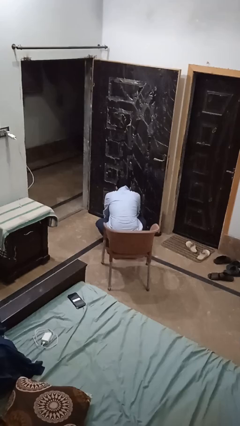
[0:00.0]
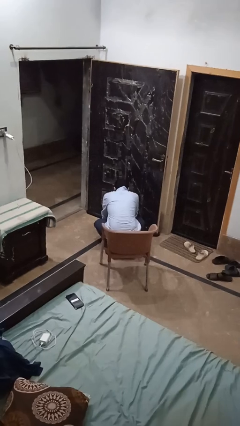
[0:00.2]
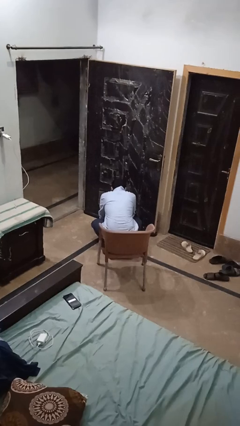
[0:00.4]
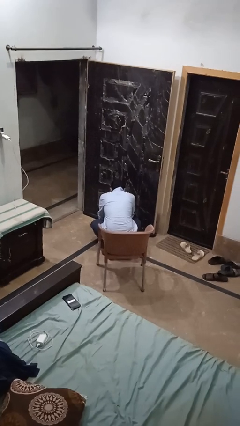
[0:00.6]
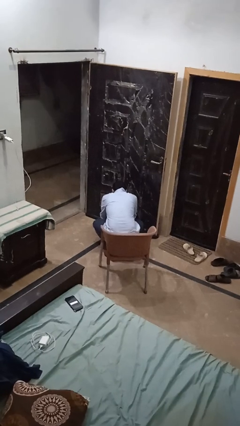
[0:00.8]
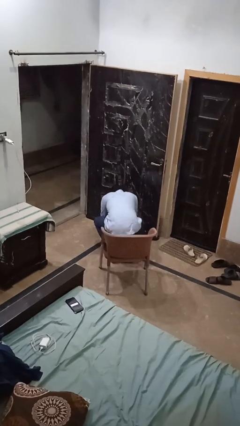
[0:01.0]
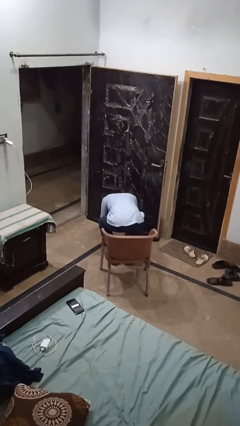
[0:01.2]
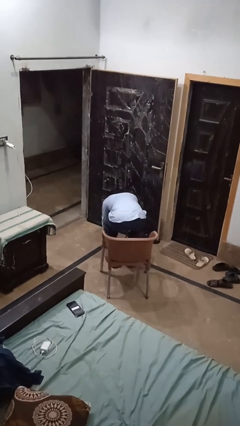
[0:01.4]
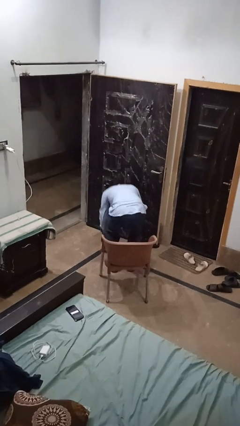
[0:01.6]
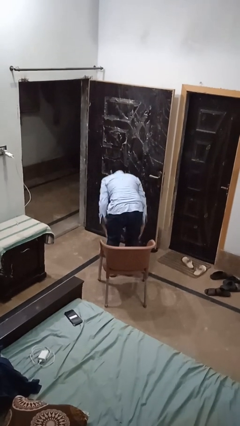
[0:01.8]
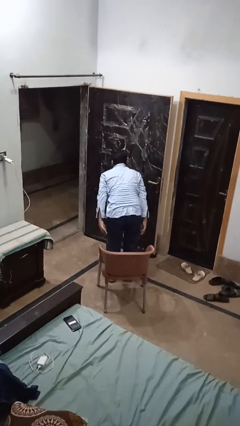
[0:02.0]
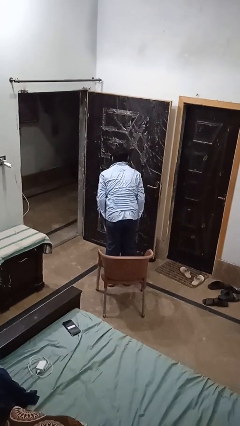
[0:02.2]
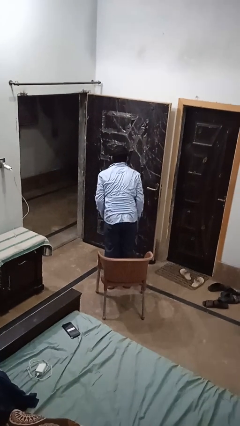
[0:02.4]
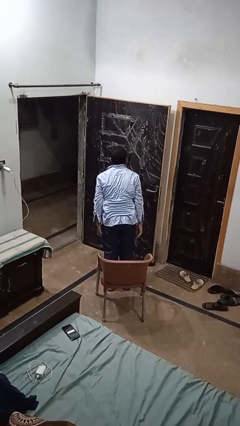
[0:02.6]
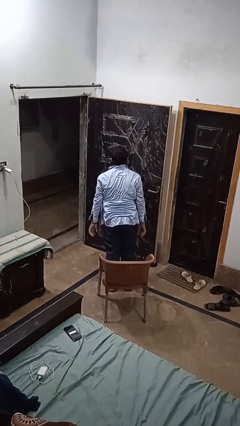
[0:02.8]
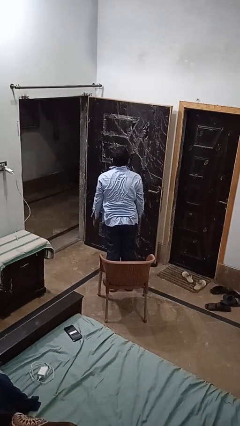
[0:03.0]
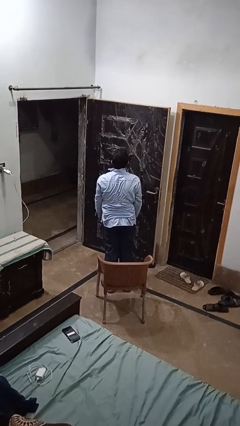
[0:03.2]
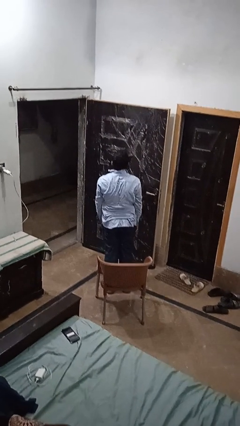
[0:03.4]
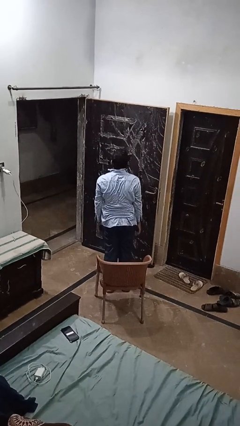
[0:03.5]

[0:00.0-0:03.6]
person stands up from floor

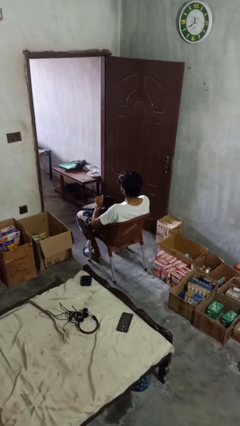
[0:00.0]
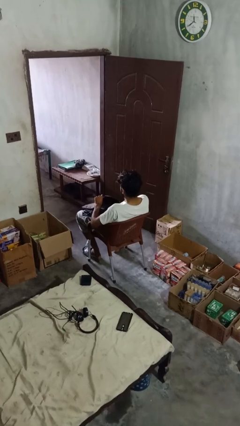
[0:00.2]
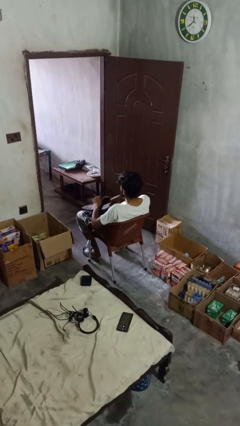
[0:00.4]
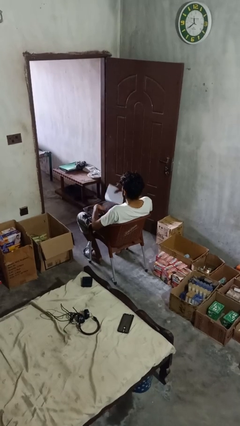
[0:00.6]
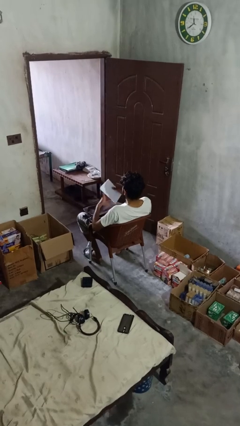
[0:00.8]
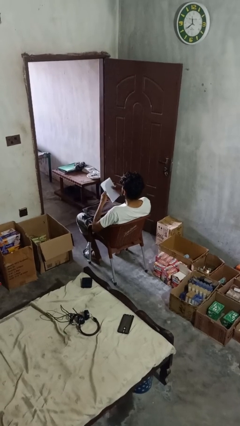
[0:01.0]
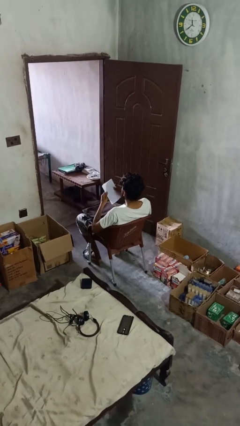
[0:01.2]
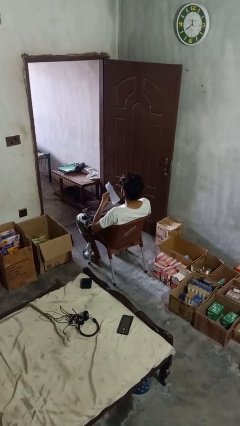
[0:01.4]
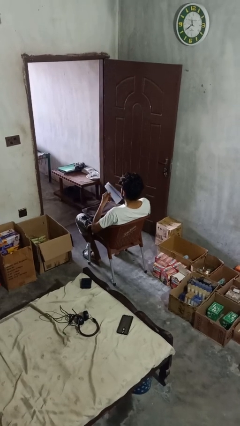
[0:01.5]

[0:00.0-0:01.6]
person takes object from backpack

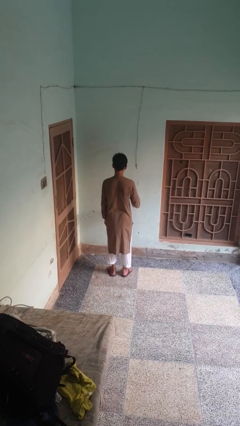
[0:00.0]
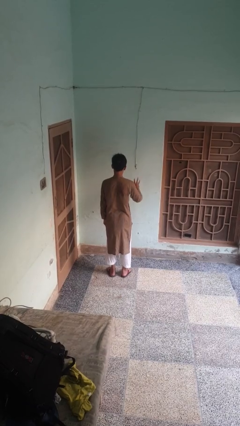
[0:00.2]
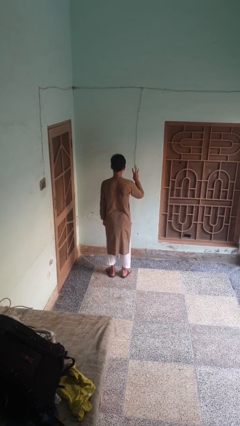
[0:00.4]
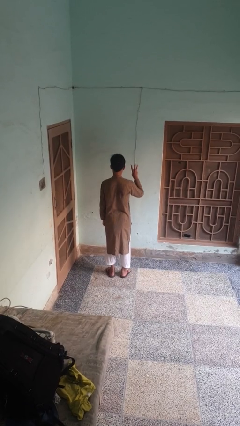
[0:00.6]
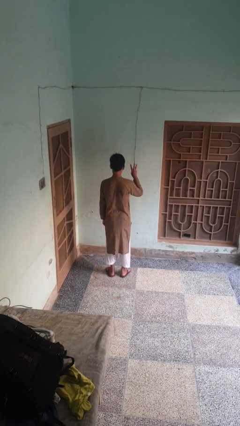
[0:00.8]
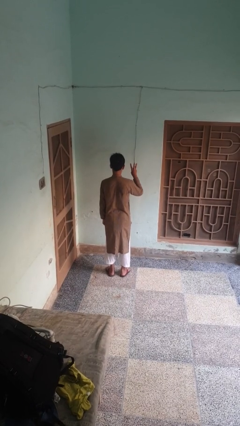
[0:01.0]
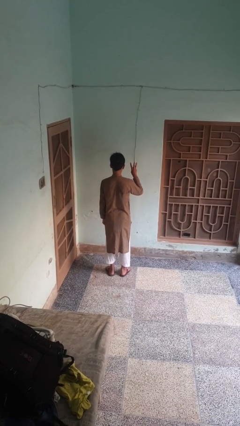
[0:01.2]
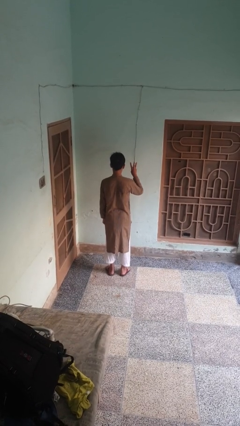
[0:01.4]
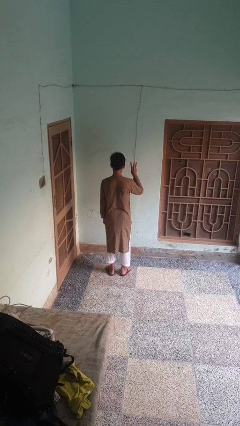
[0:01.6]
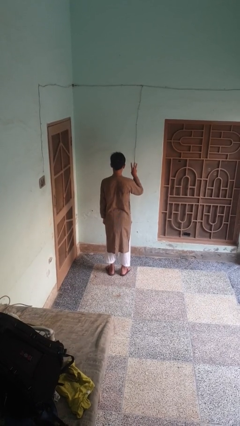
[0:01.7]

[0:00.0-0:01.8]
person gestures number three

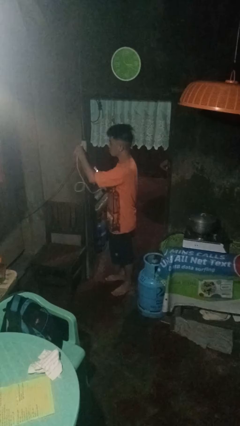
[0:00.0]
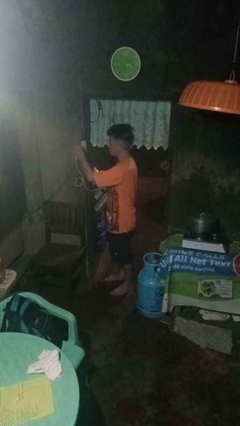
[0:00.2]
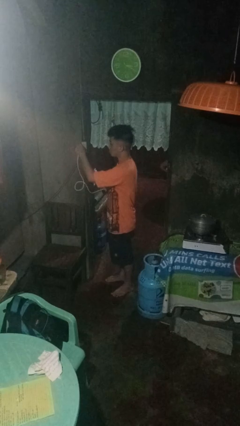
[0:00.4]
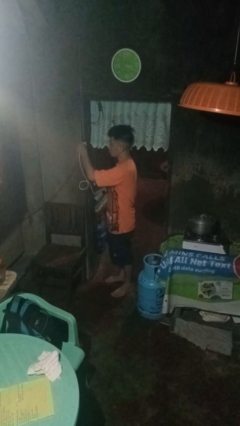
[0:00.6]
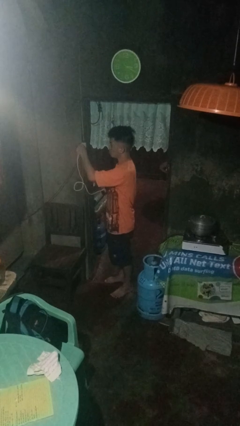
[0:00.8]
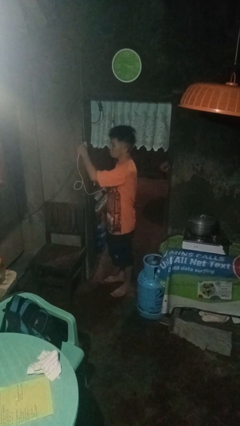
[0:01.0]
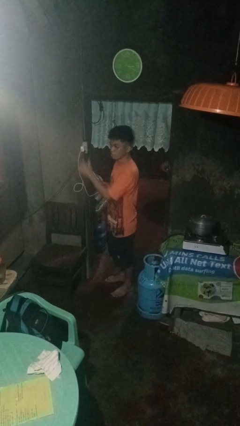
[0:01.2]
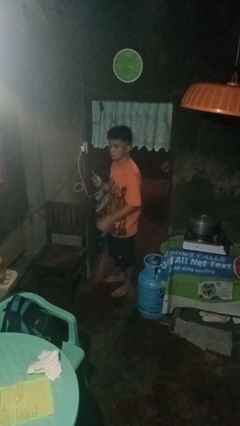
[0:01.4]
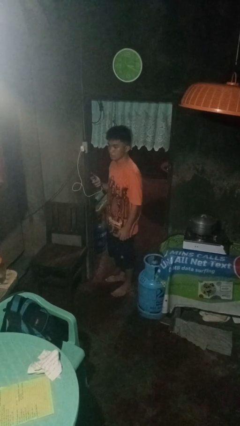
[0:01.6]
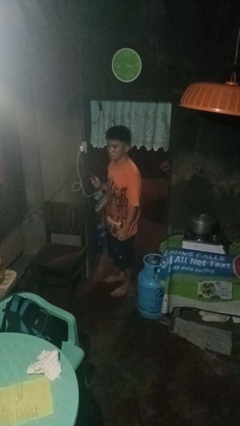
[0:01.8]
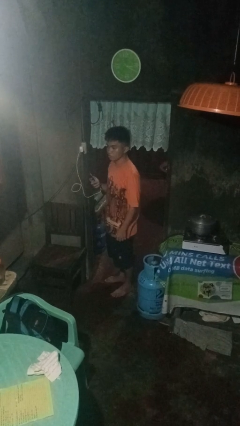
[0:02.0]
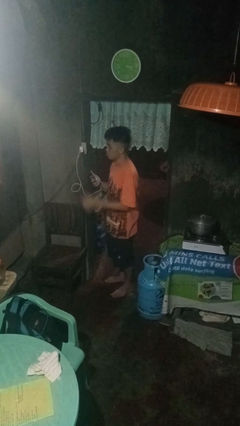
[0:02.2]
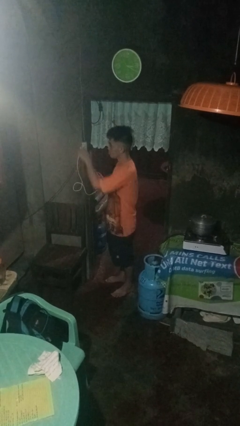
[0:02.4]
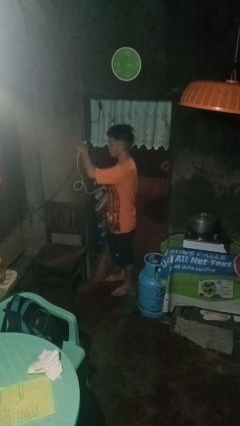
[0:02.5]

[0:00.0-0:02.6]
person plugs into electrical socket

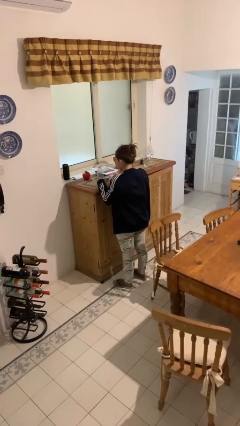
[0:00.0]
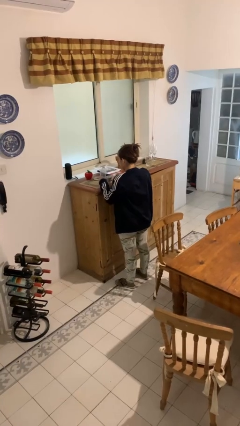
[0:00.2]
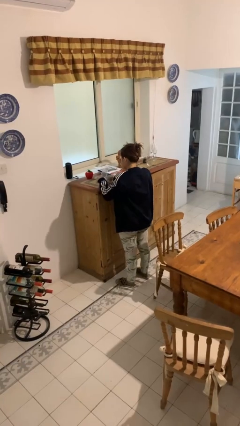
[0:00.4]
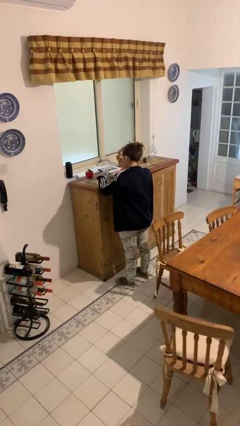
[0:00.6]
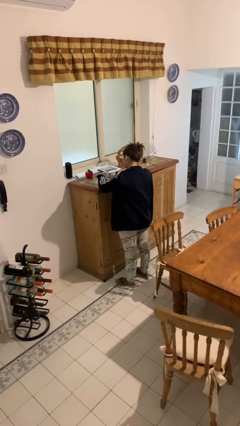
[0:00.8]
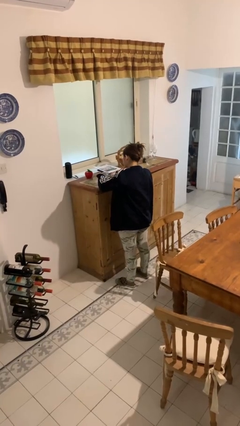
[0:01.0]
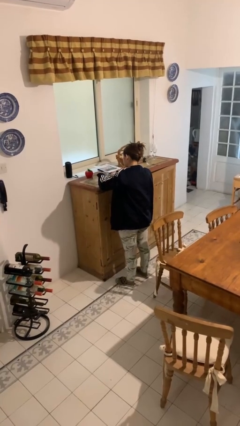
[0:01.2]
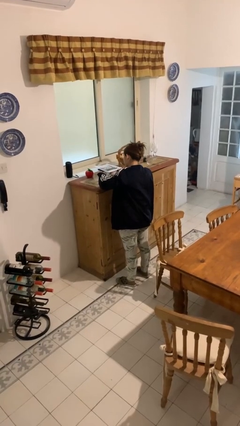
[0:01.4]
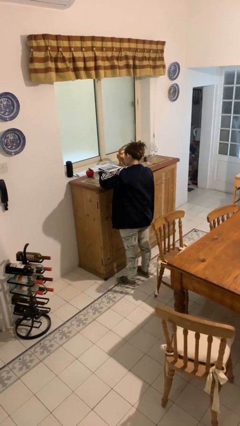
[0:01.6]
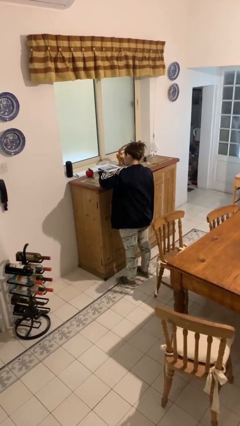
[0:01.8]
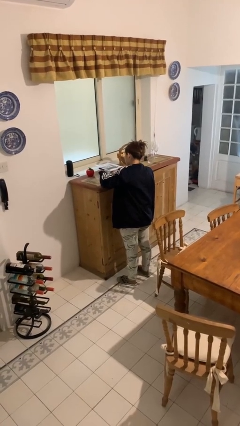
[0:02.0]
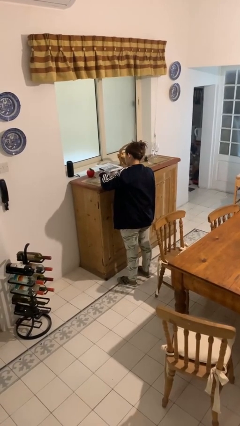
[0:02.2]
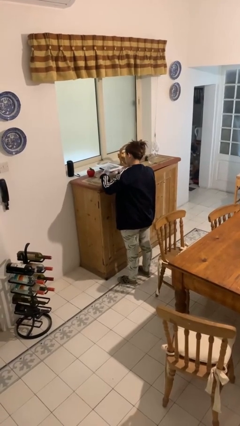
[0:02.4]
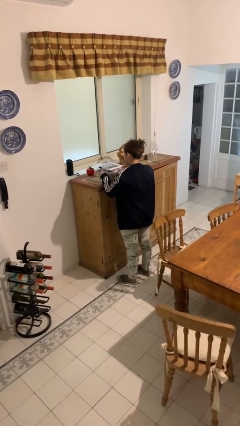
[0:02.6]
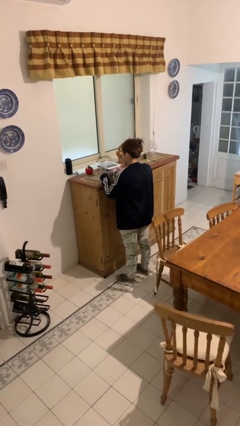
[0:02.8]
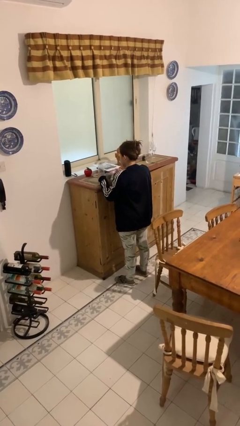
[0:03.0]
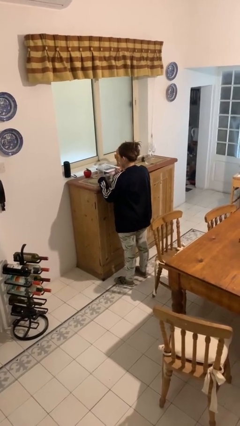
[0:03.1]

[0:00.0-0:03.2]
person pours liquid into cup

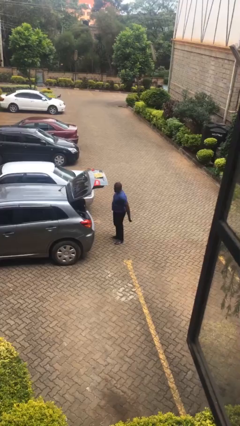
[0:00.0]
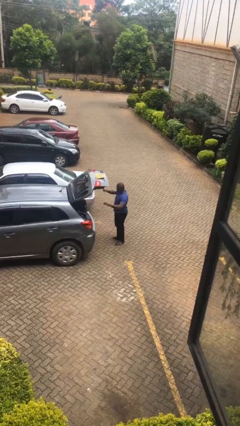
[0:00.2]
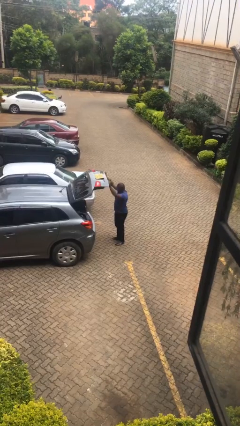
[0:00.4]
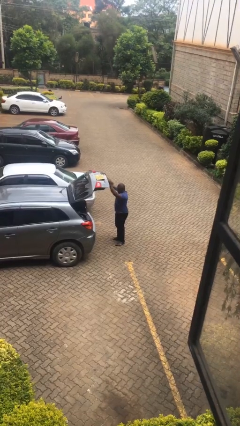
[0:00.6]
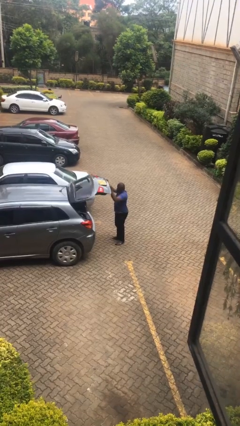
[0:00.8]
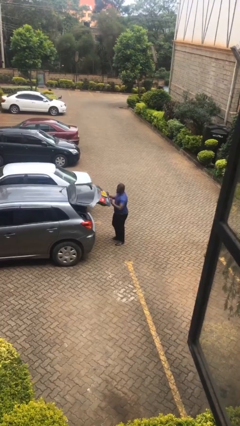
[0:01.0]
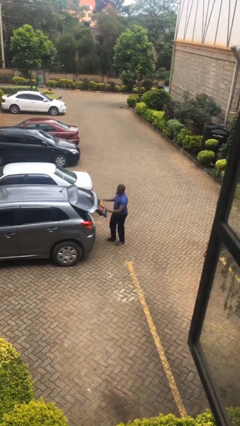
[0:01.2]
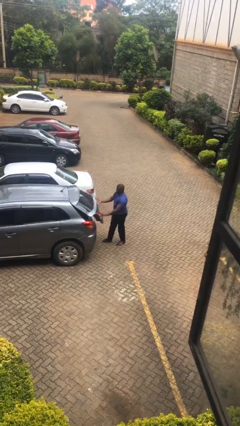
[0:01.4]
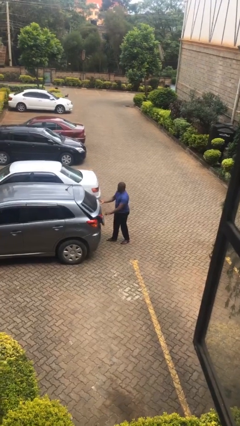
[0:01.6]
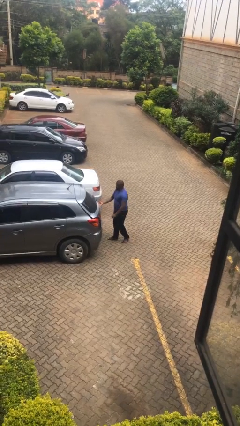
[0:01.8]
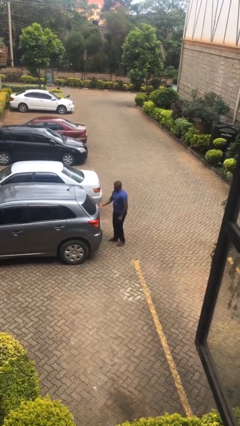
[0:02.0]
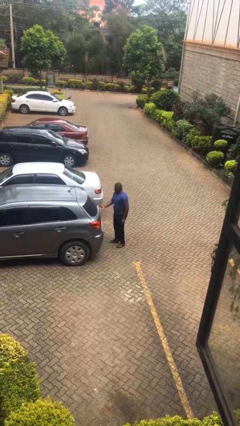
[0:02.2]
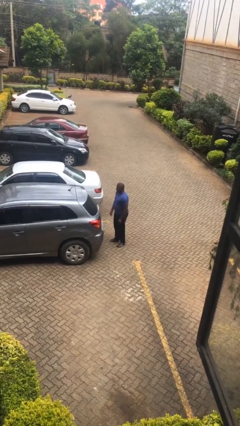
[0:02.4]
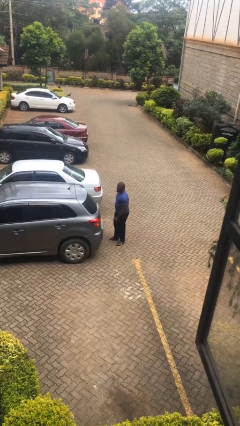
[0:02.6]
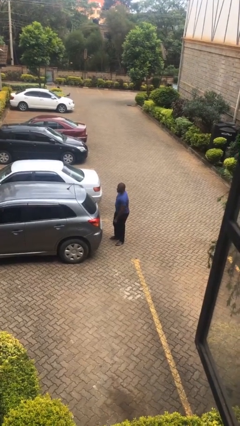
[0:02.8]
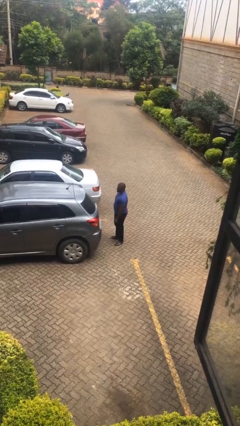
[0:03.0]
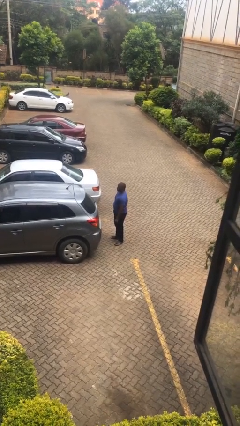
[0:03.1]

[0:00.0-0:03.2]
person closes car trunk

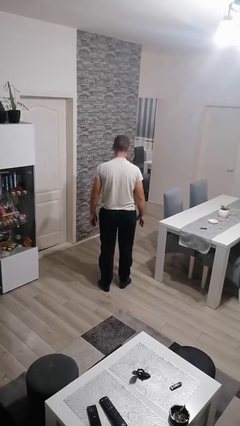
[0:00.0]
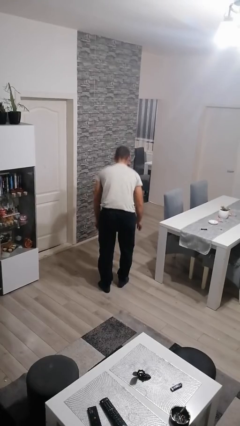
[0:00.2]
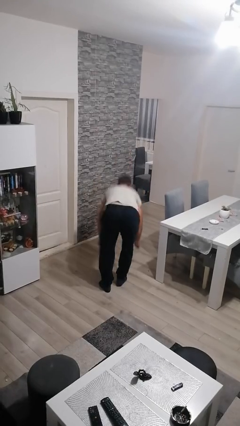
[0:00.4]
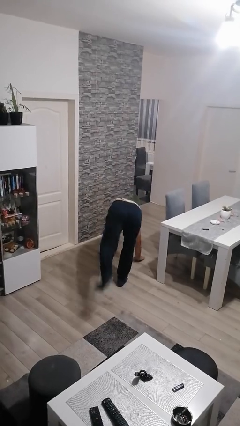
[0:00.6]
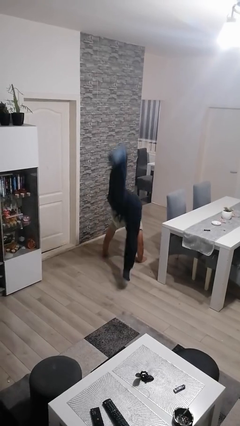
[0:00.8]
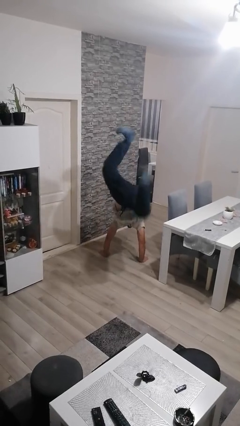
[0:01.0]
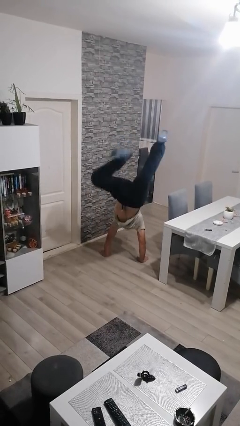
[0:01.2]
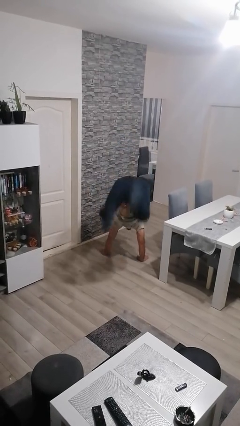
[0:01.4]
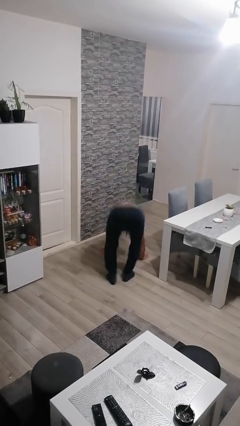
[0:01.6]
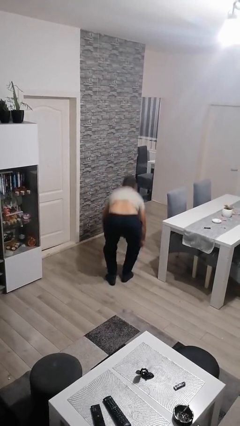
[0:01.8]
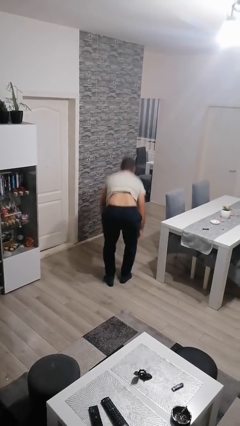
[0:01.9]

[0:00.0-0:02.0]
person handstand
